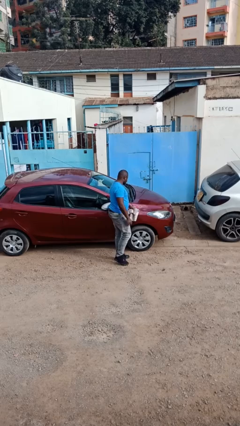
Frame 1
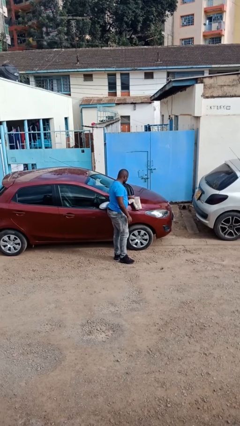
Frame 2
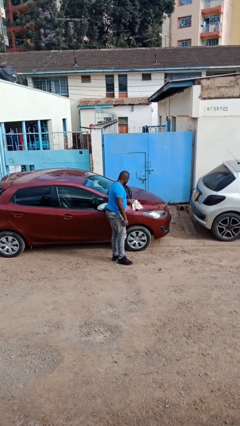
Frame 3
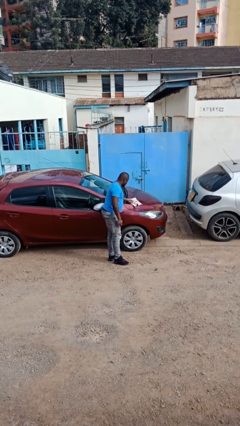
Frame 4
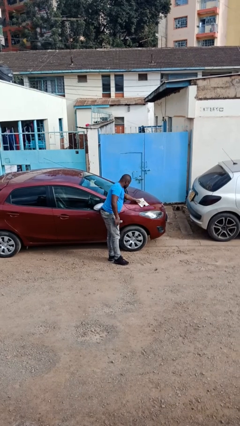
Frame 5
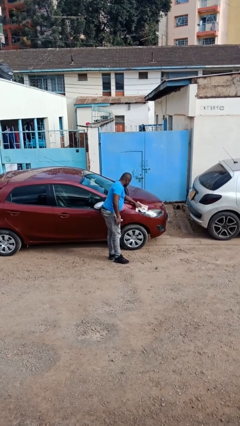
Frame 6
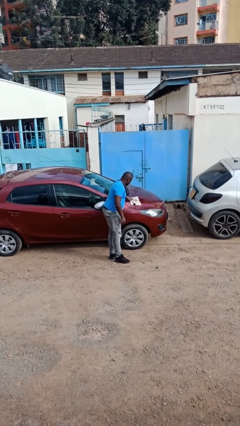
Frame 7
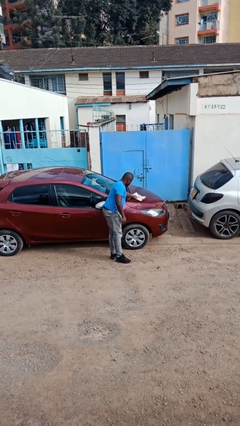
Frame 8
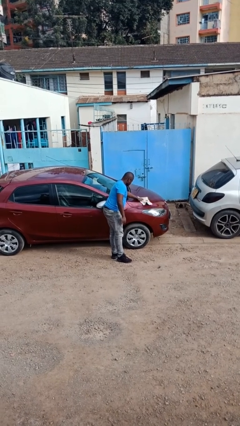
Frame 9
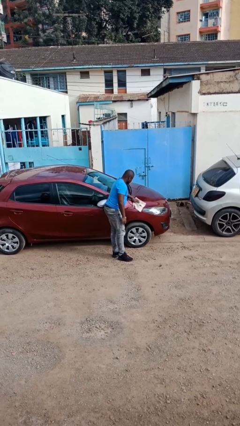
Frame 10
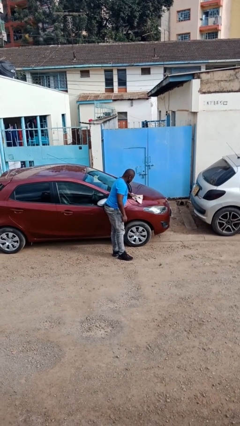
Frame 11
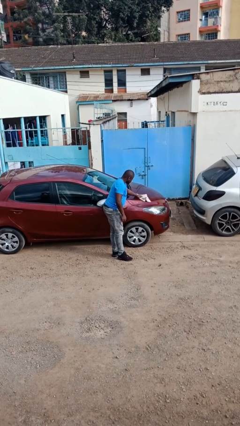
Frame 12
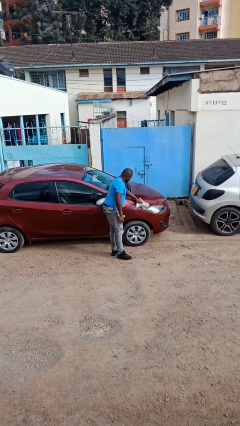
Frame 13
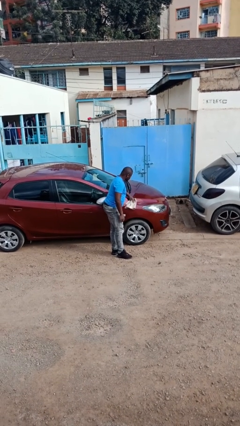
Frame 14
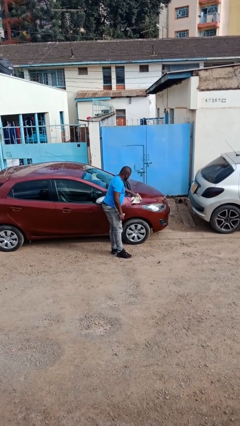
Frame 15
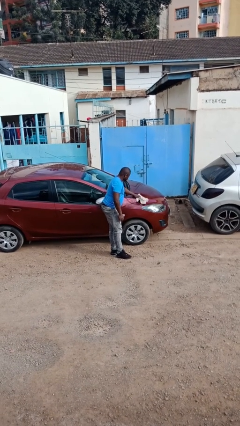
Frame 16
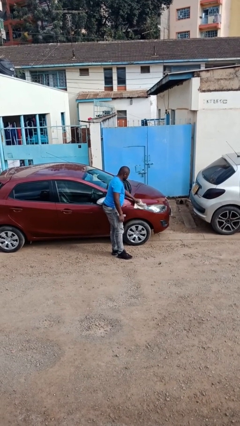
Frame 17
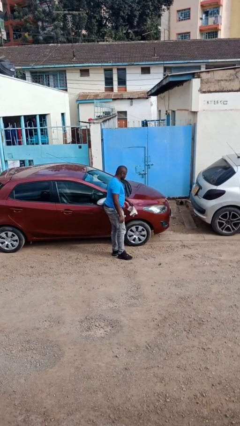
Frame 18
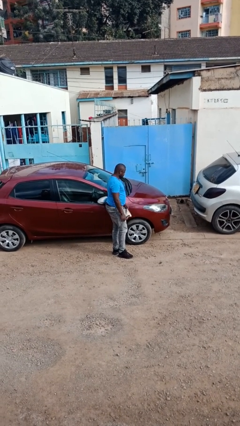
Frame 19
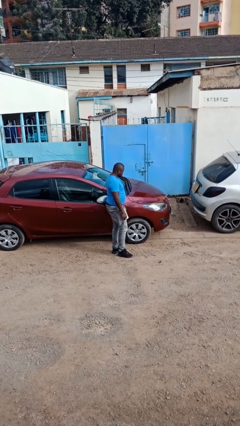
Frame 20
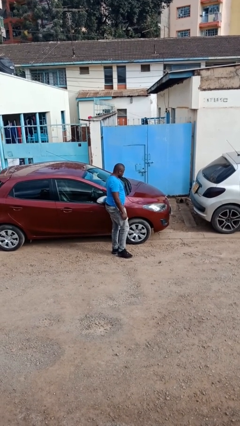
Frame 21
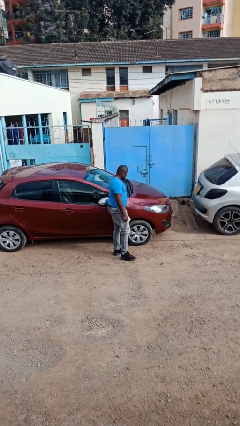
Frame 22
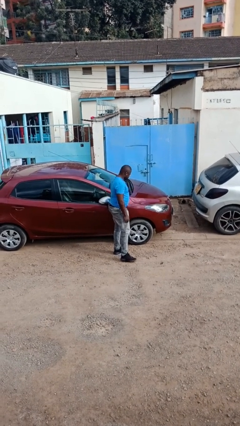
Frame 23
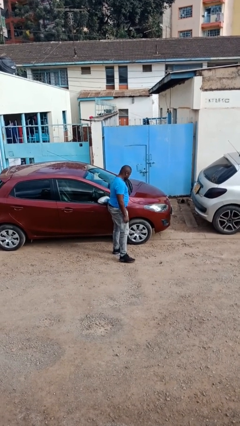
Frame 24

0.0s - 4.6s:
person polishes car with rag

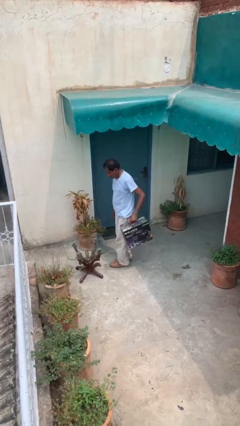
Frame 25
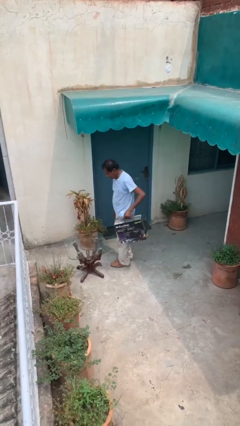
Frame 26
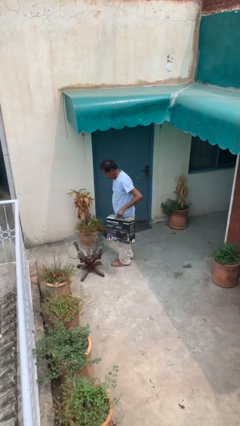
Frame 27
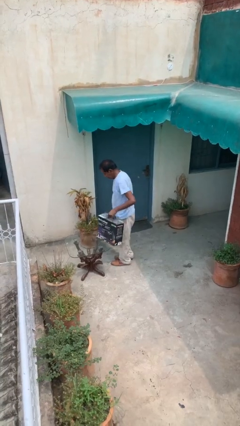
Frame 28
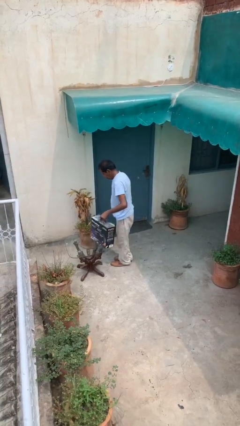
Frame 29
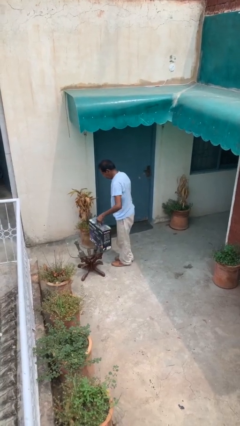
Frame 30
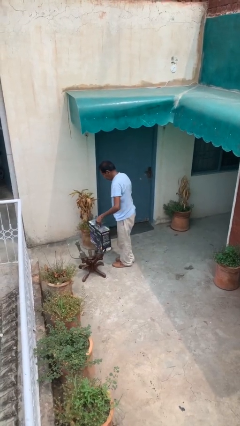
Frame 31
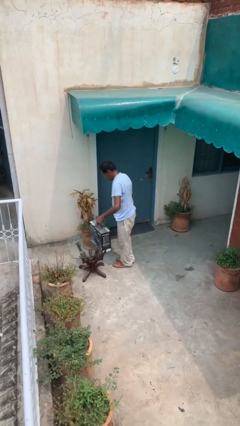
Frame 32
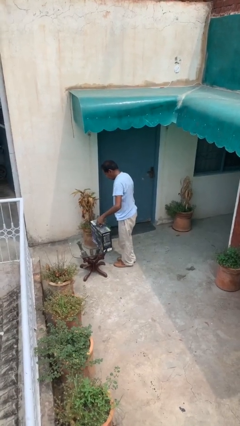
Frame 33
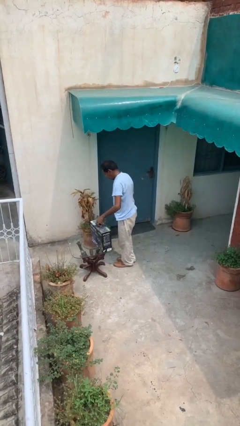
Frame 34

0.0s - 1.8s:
person puts down object on table

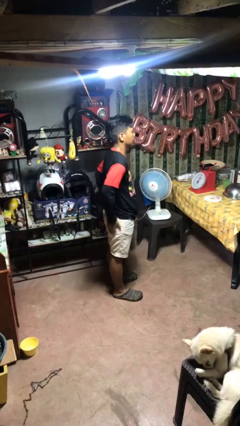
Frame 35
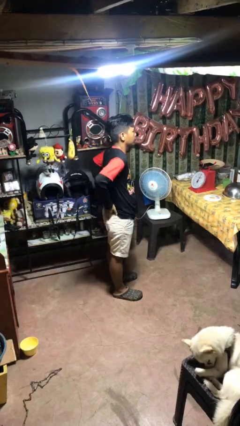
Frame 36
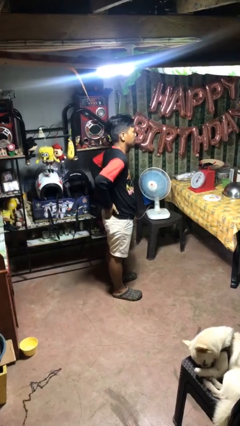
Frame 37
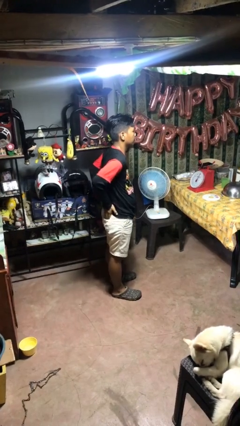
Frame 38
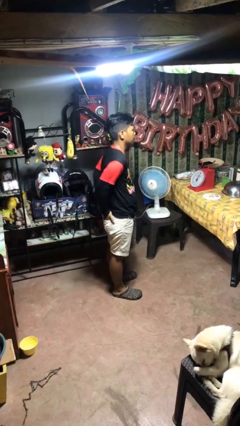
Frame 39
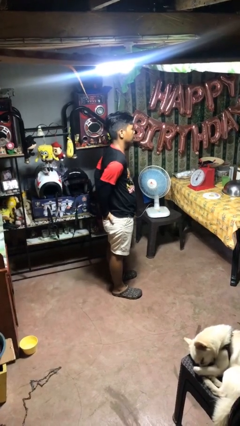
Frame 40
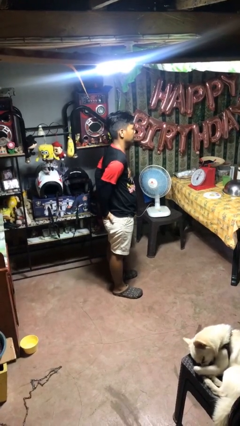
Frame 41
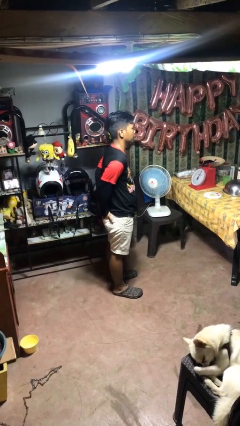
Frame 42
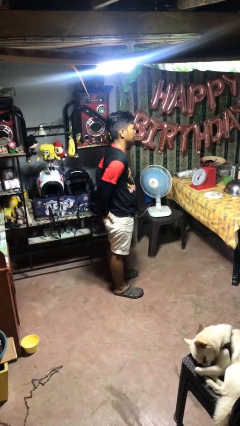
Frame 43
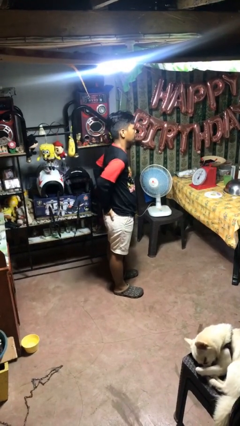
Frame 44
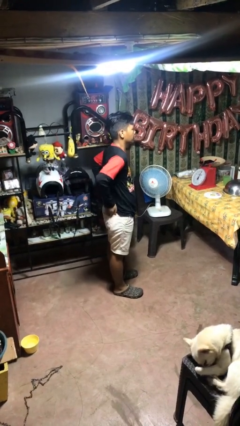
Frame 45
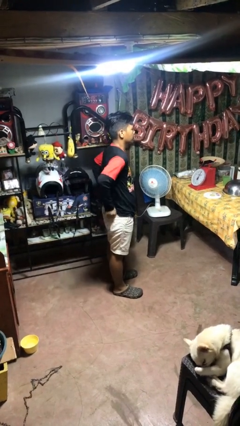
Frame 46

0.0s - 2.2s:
person puts hands in back pockets

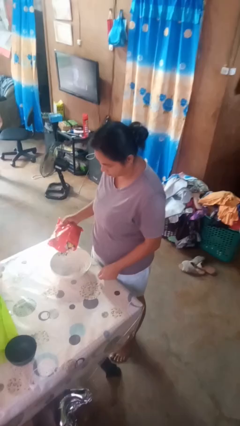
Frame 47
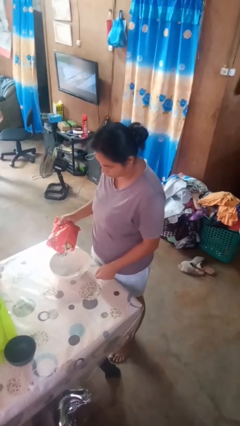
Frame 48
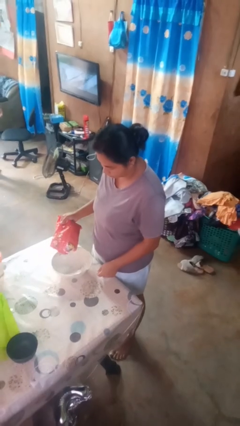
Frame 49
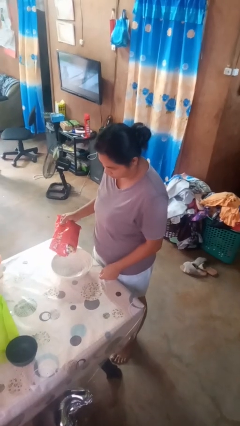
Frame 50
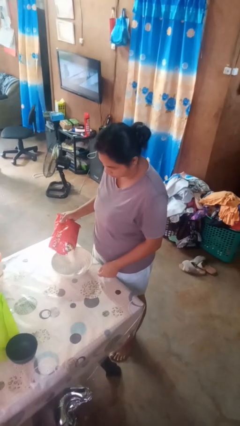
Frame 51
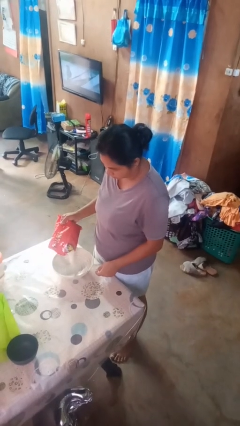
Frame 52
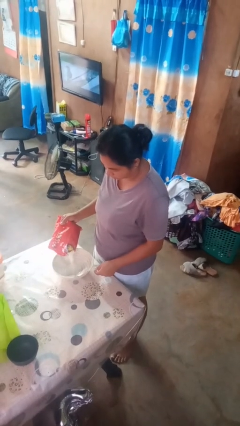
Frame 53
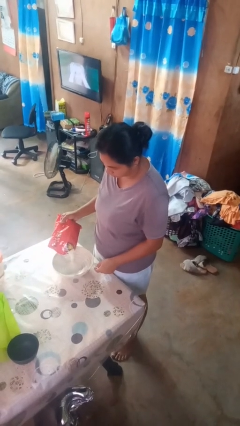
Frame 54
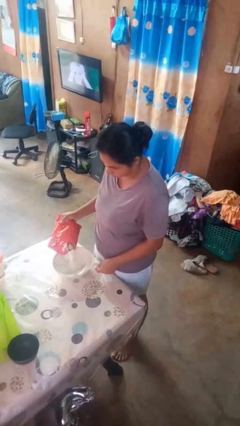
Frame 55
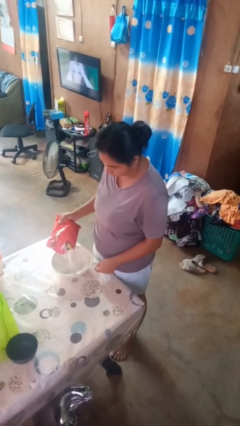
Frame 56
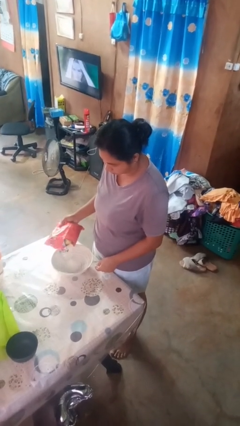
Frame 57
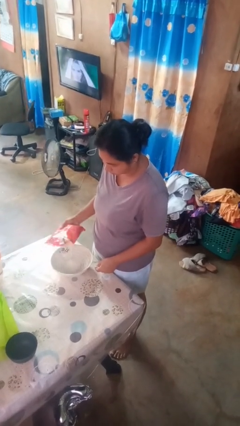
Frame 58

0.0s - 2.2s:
person pours into bowl

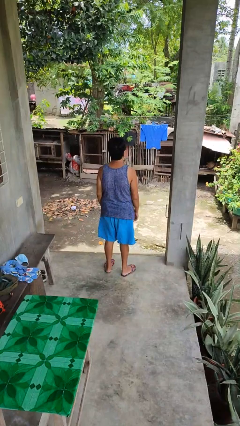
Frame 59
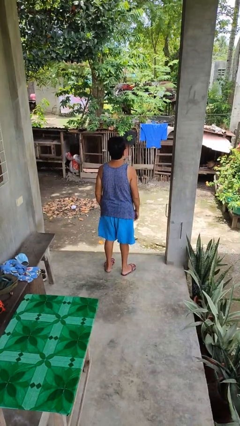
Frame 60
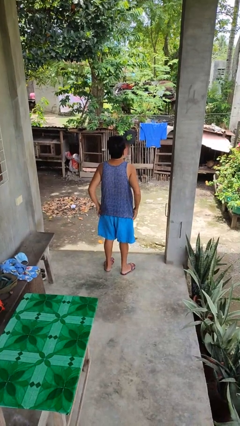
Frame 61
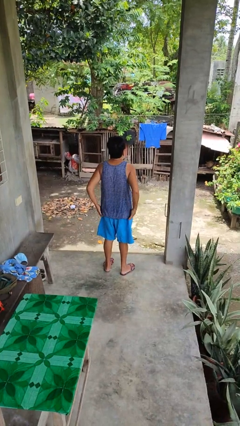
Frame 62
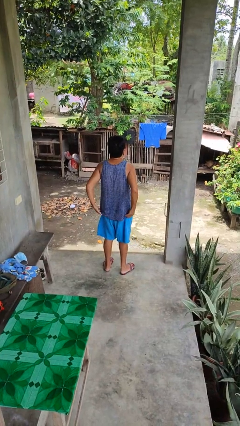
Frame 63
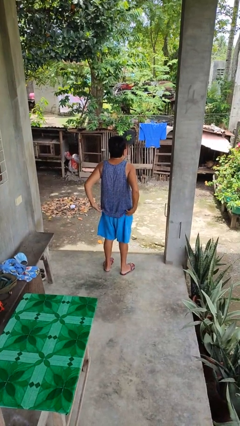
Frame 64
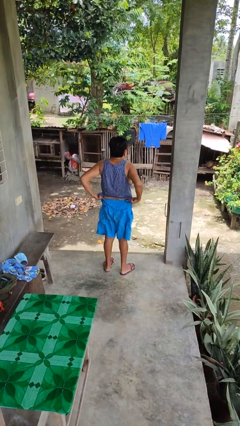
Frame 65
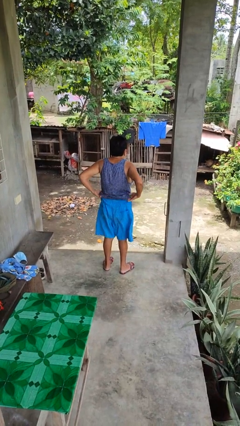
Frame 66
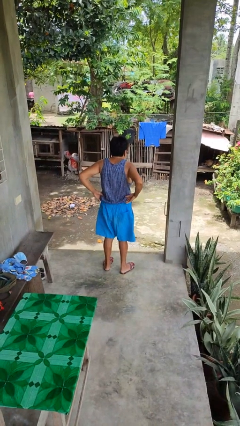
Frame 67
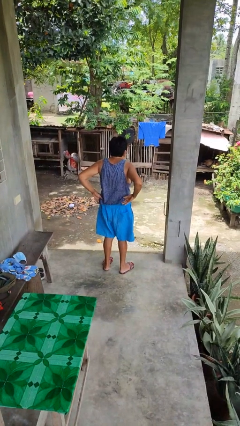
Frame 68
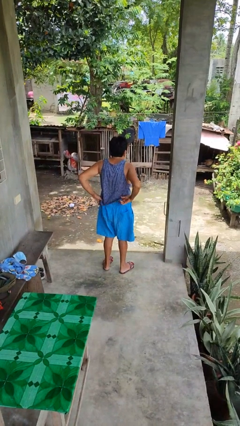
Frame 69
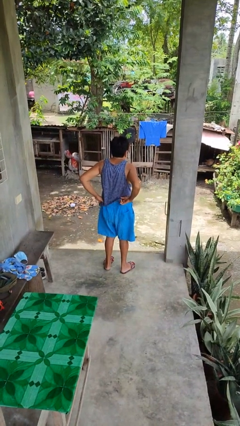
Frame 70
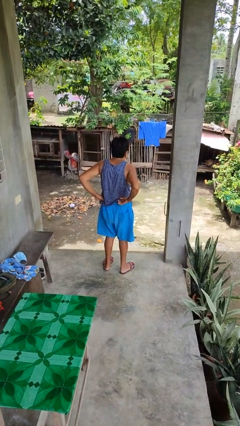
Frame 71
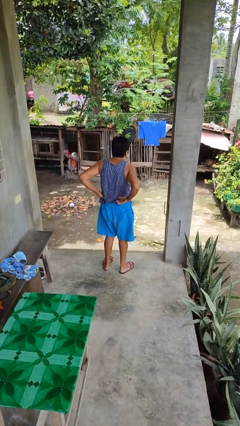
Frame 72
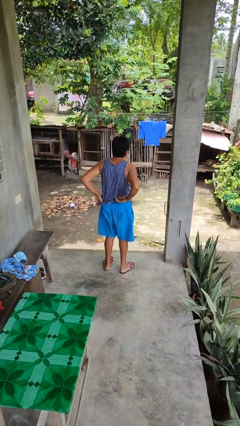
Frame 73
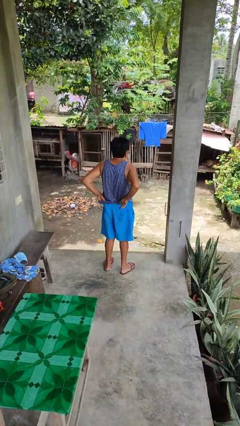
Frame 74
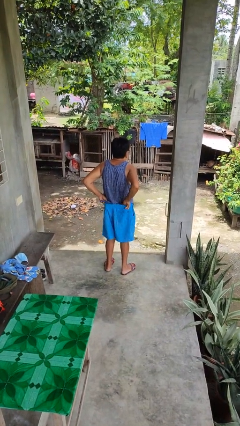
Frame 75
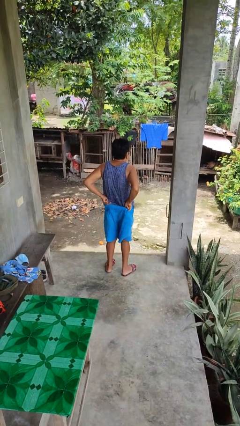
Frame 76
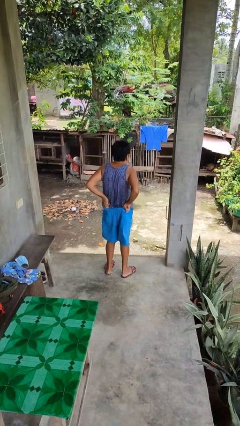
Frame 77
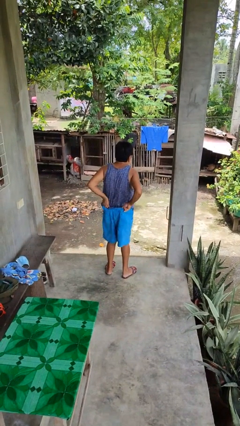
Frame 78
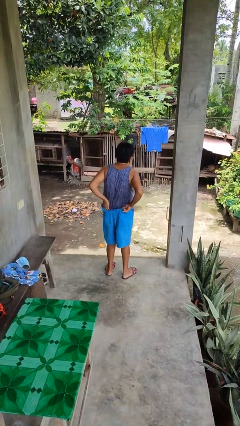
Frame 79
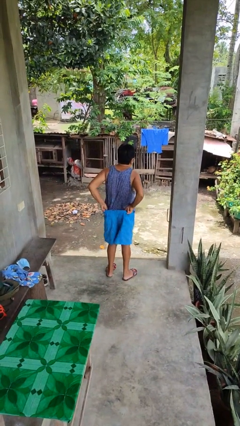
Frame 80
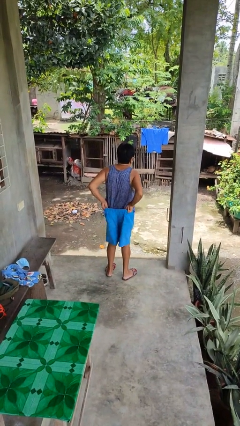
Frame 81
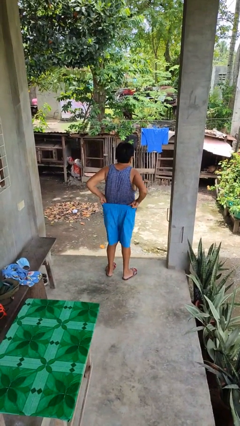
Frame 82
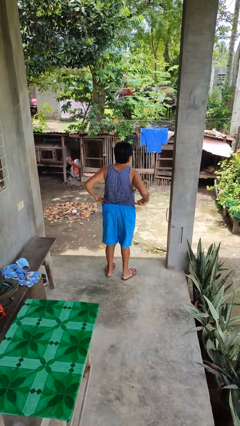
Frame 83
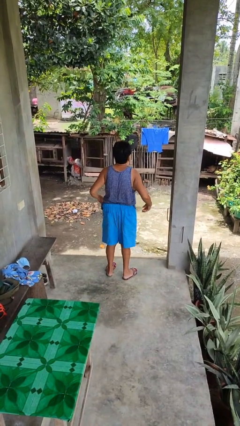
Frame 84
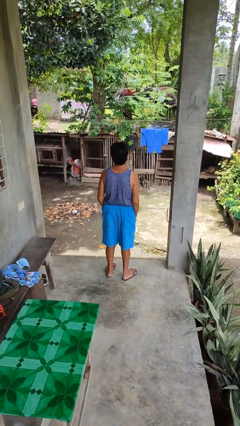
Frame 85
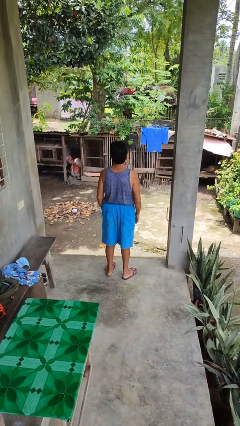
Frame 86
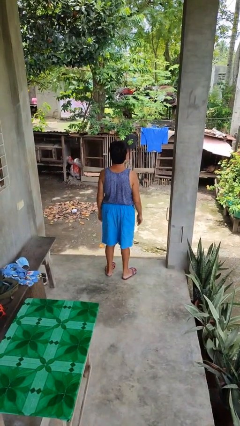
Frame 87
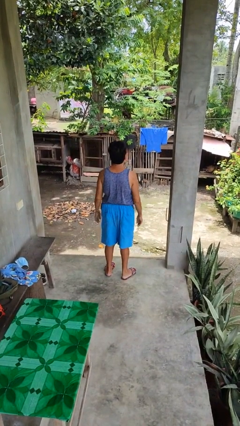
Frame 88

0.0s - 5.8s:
person tucks in shirt

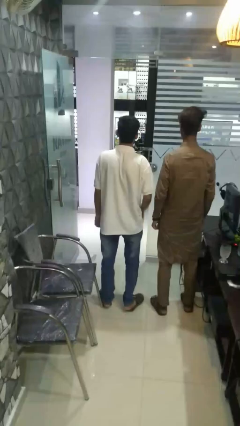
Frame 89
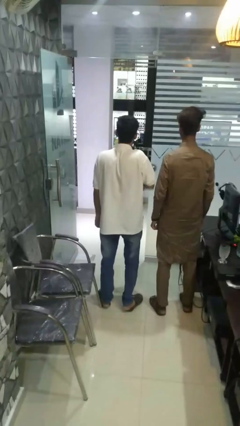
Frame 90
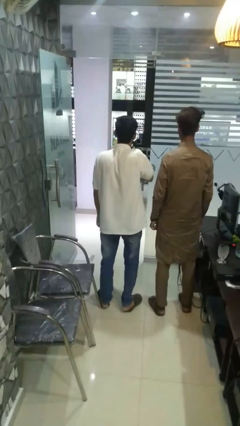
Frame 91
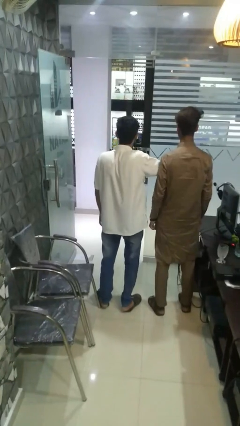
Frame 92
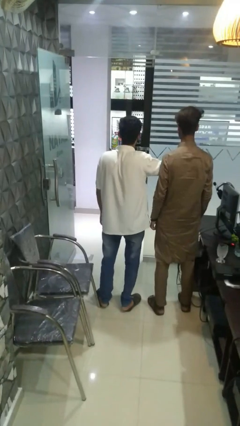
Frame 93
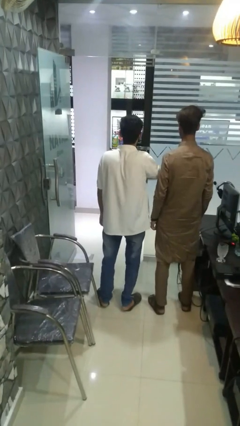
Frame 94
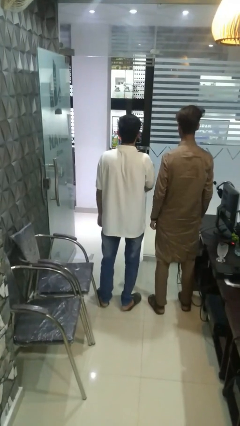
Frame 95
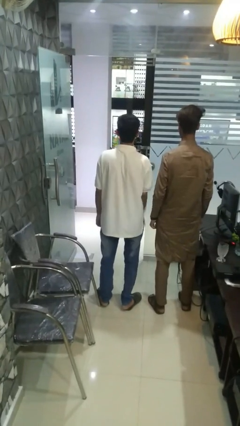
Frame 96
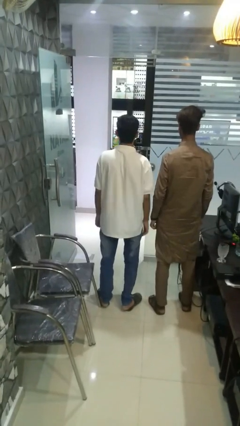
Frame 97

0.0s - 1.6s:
person nudges person with elbow
